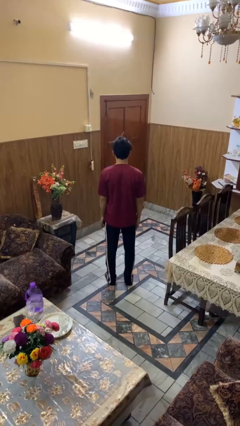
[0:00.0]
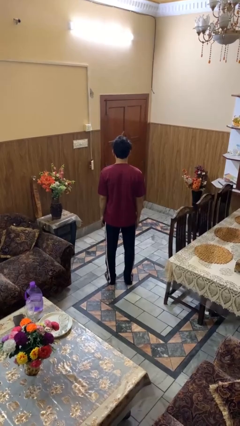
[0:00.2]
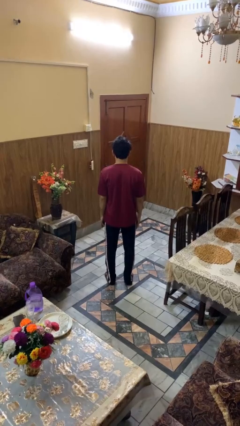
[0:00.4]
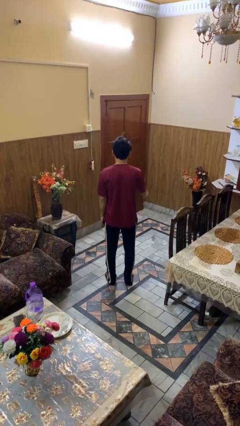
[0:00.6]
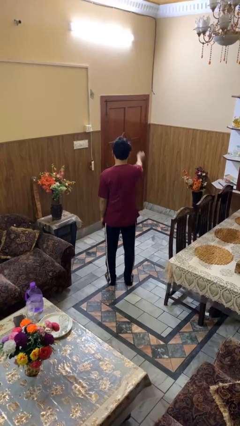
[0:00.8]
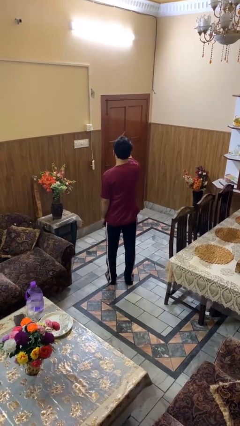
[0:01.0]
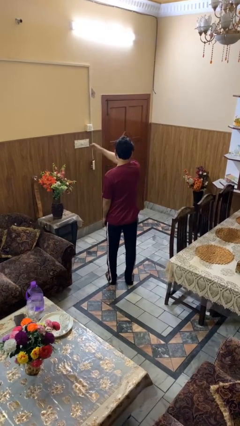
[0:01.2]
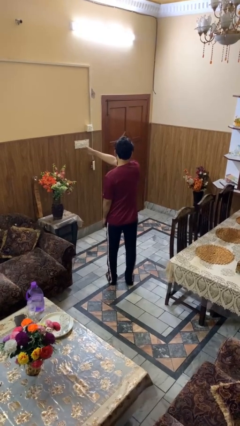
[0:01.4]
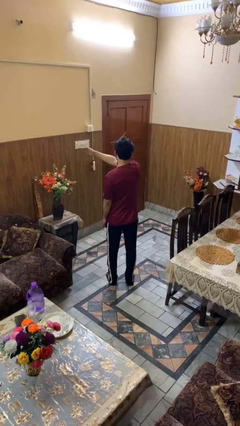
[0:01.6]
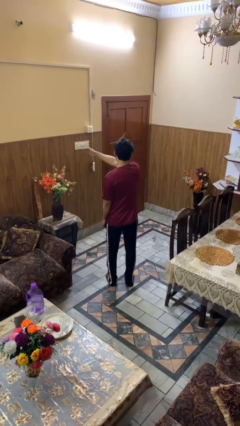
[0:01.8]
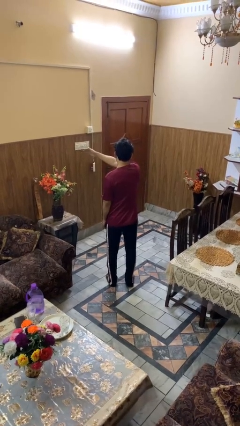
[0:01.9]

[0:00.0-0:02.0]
person gestures swipe left

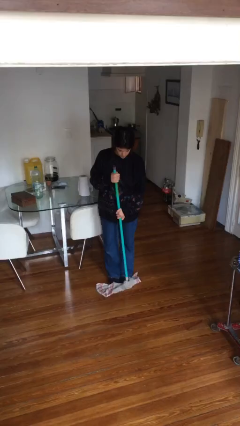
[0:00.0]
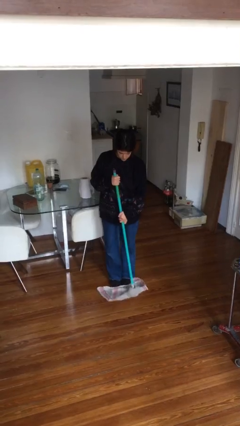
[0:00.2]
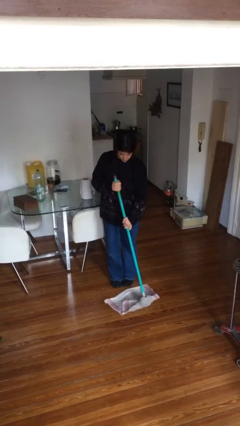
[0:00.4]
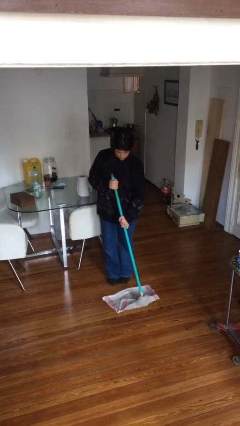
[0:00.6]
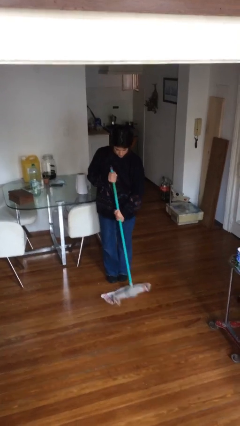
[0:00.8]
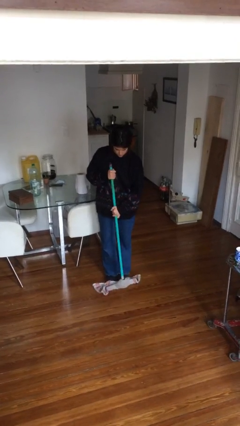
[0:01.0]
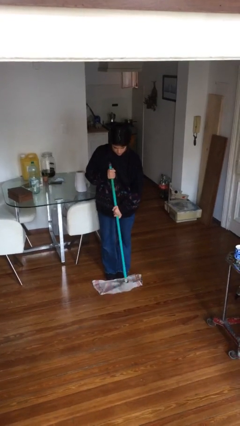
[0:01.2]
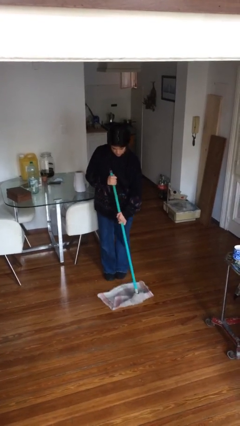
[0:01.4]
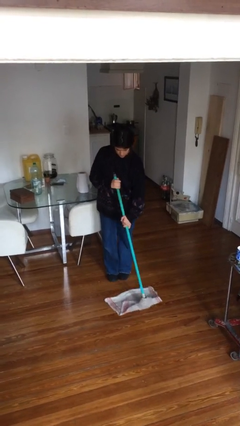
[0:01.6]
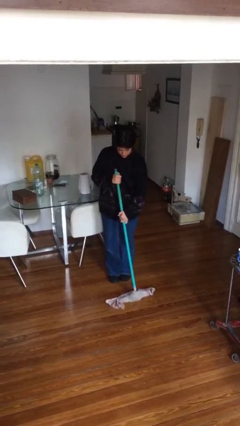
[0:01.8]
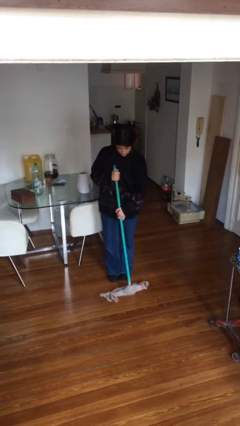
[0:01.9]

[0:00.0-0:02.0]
person mops

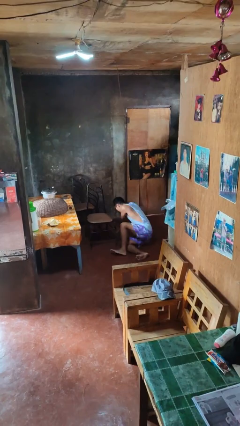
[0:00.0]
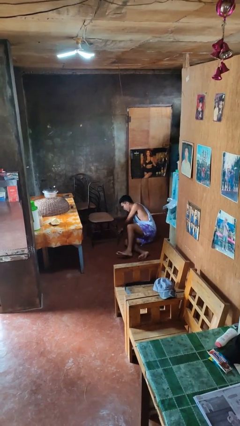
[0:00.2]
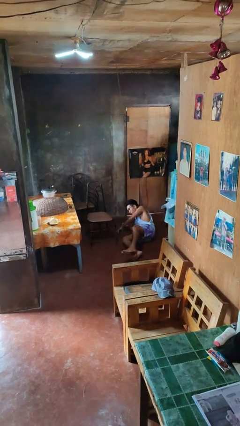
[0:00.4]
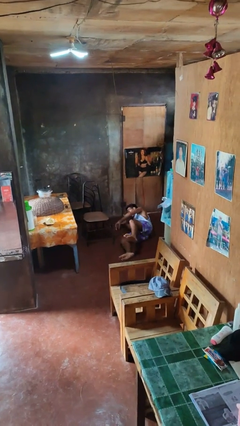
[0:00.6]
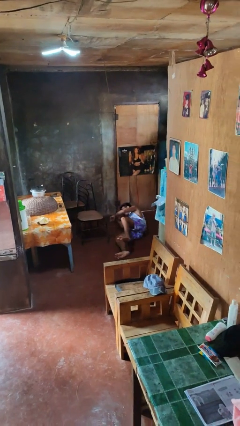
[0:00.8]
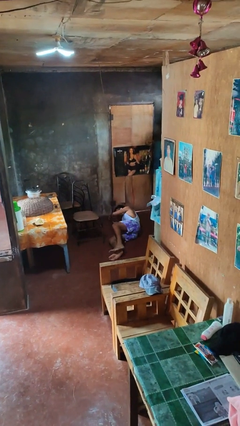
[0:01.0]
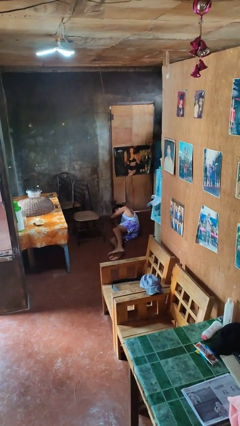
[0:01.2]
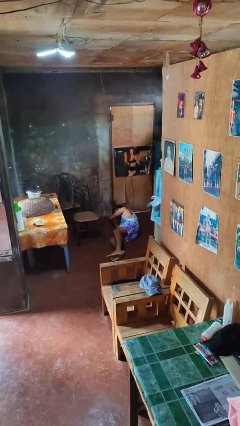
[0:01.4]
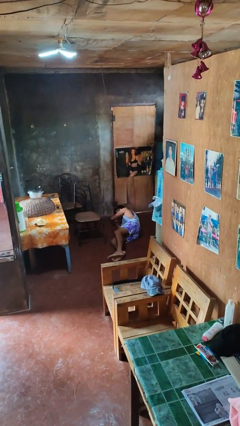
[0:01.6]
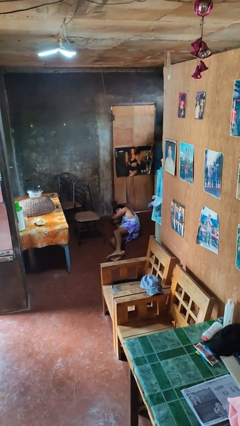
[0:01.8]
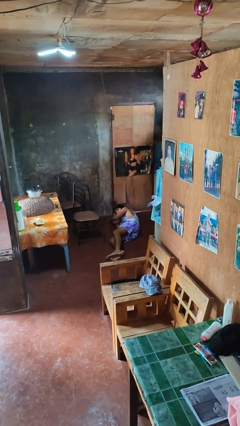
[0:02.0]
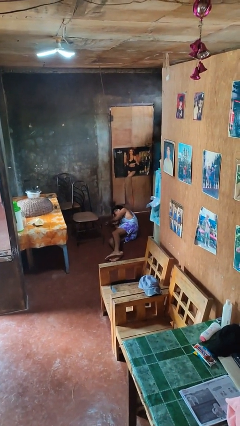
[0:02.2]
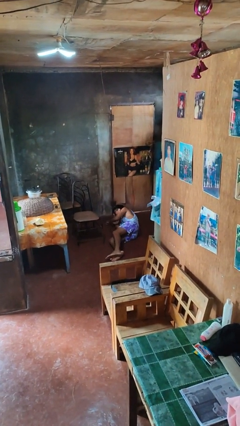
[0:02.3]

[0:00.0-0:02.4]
person lies down on floor

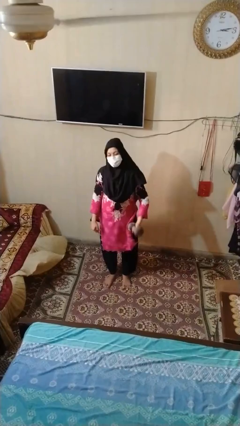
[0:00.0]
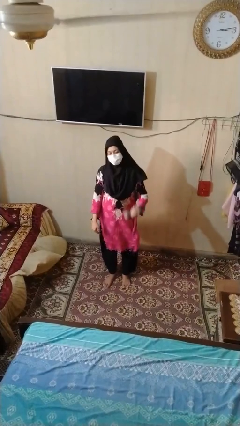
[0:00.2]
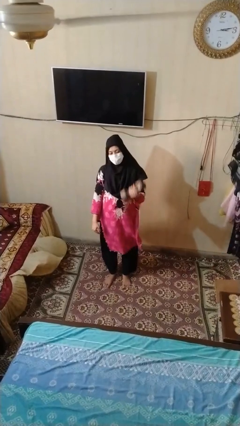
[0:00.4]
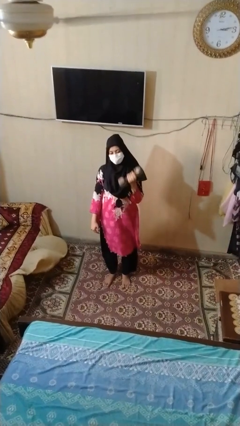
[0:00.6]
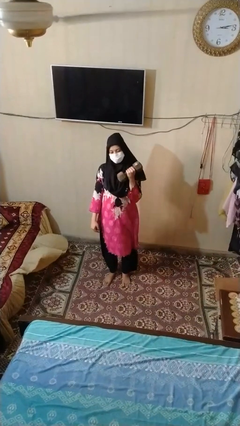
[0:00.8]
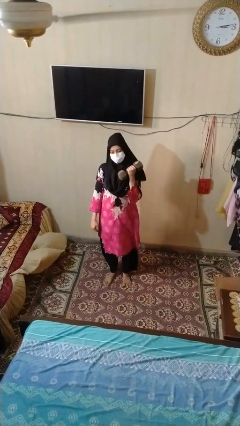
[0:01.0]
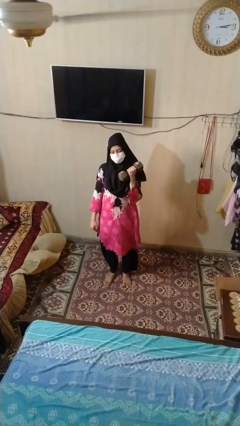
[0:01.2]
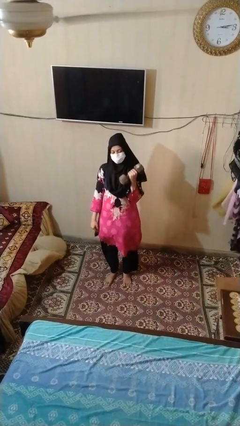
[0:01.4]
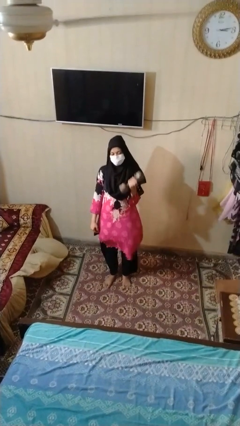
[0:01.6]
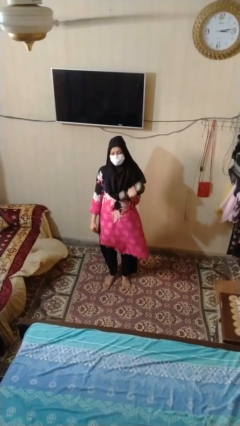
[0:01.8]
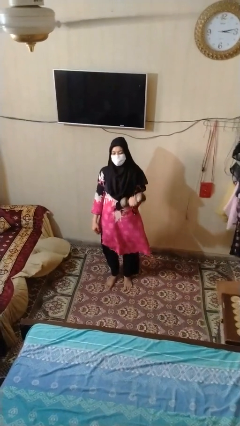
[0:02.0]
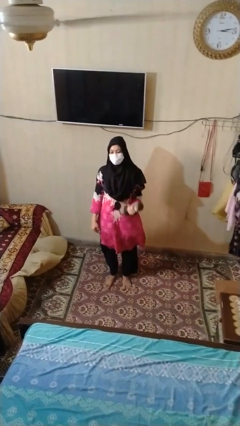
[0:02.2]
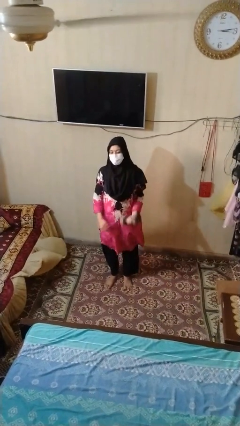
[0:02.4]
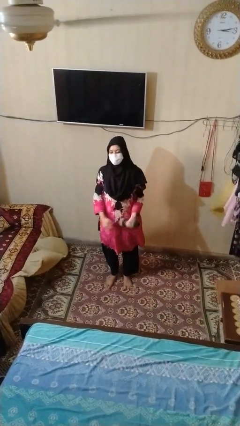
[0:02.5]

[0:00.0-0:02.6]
person lifts dumbbells

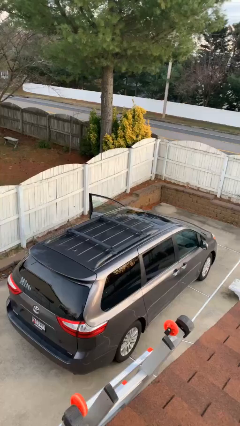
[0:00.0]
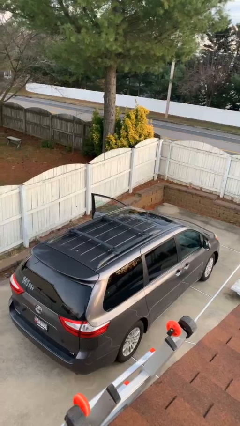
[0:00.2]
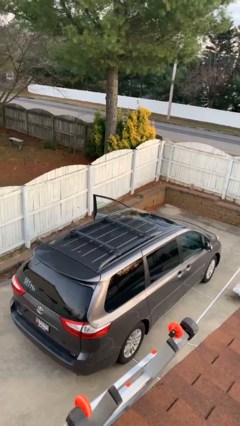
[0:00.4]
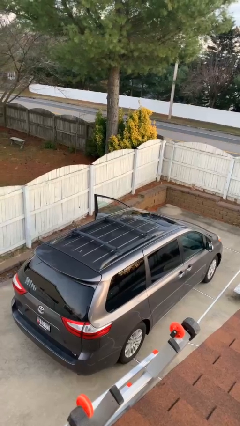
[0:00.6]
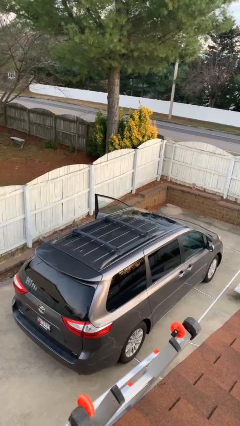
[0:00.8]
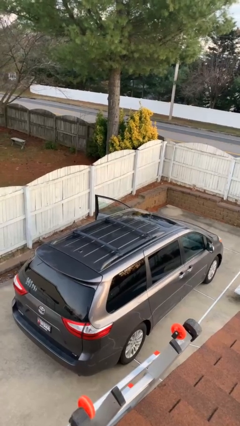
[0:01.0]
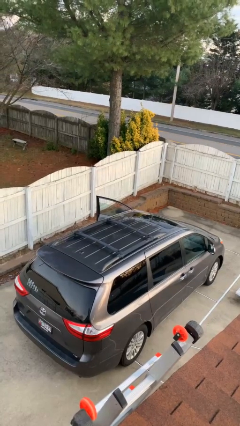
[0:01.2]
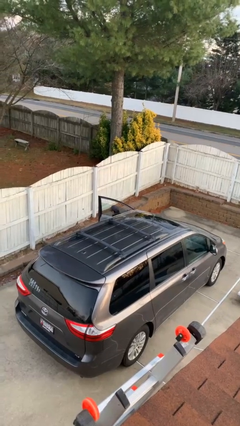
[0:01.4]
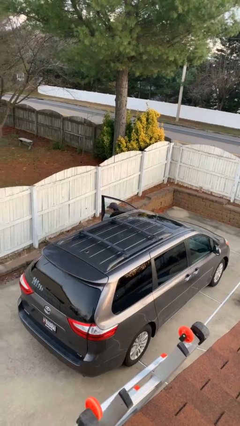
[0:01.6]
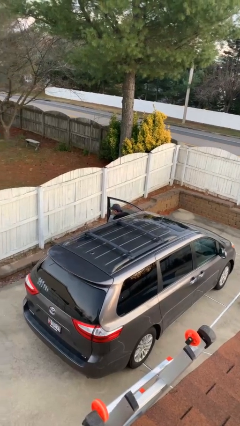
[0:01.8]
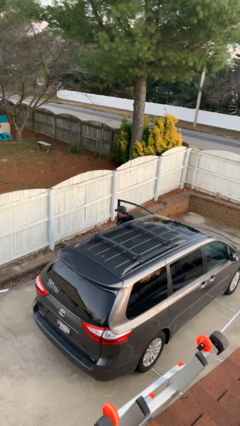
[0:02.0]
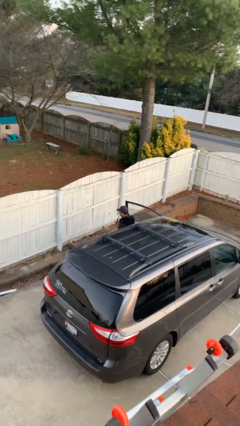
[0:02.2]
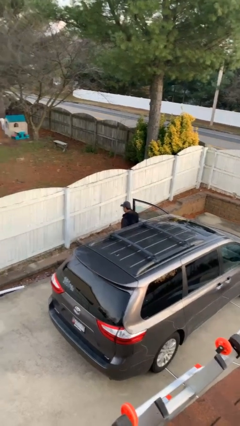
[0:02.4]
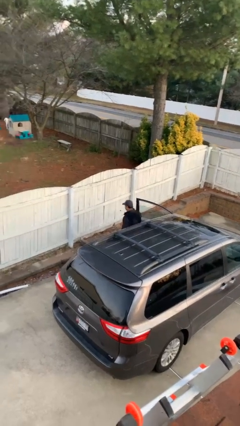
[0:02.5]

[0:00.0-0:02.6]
person exits car

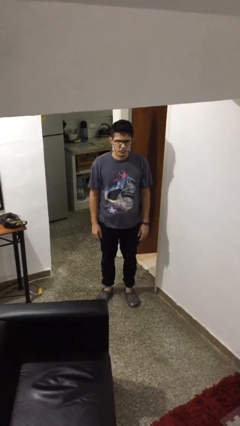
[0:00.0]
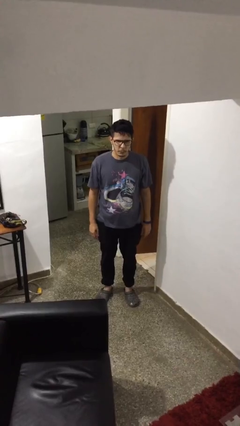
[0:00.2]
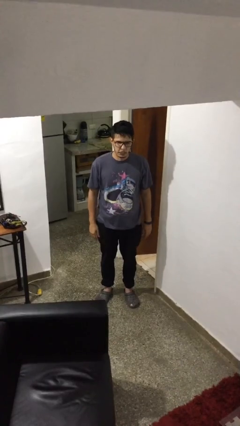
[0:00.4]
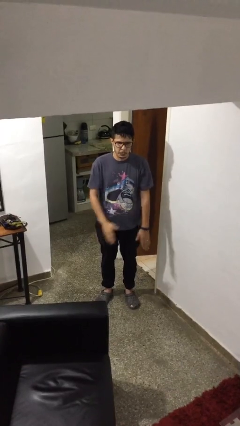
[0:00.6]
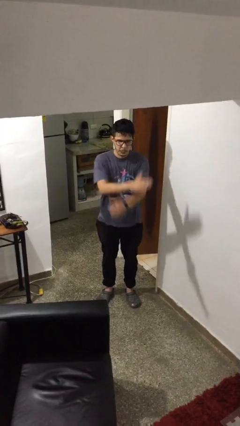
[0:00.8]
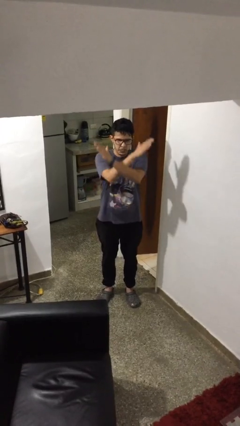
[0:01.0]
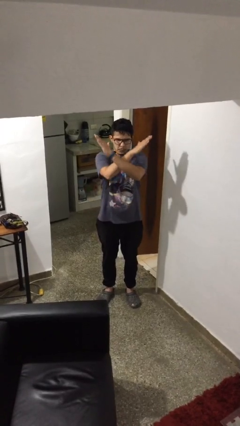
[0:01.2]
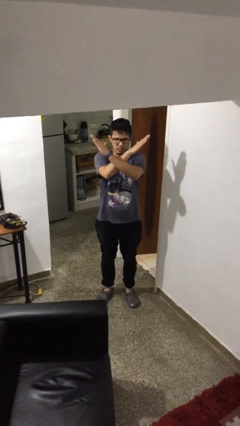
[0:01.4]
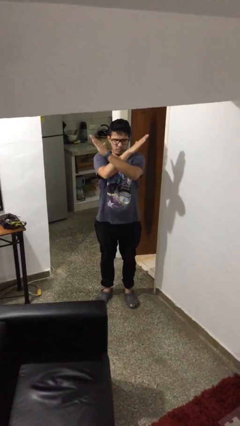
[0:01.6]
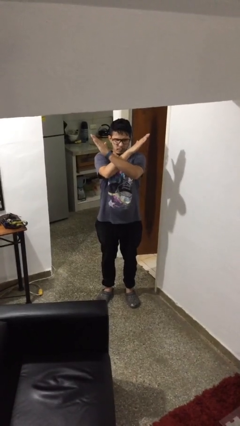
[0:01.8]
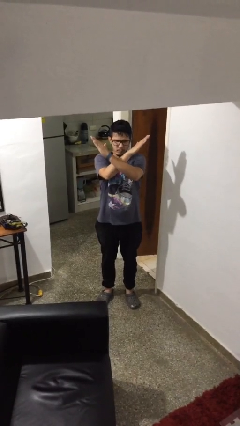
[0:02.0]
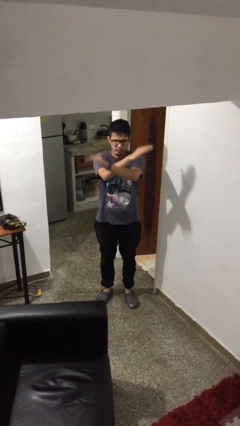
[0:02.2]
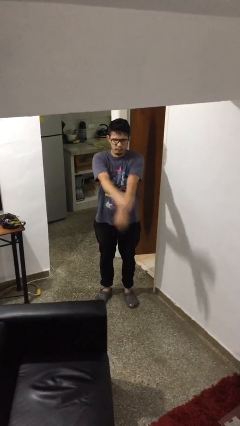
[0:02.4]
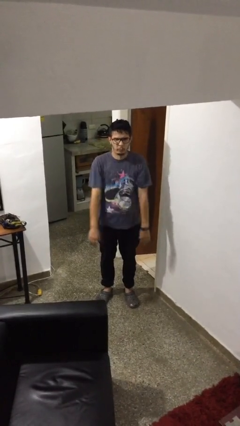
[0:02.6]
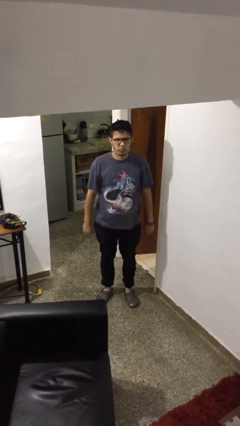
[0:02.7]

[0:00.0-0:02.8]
person gestures arms x

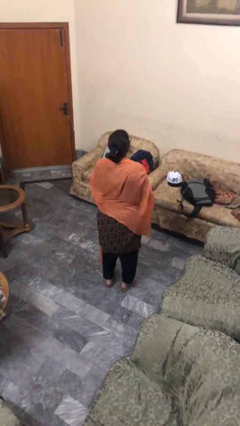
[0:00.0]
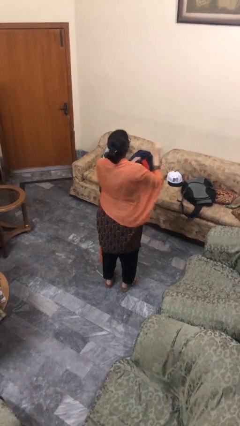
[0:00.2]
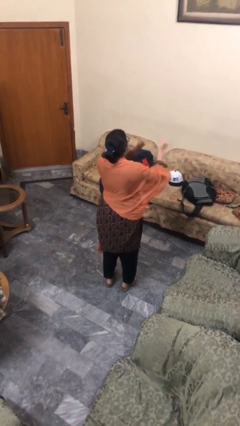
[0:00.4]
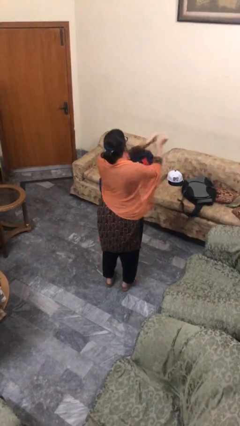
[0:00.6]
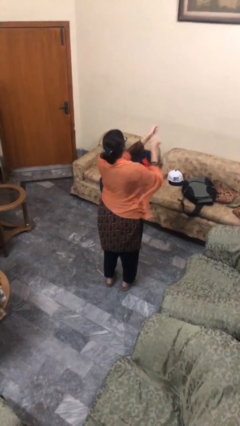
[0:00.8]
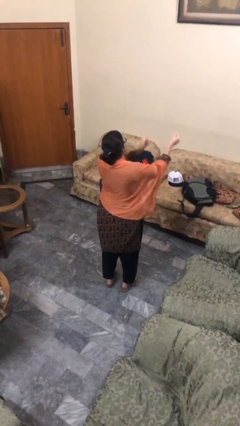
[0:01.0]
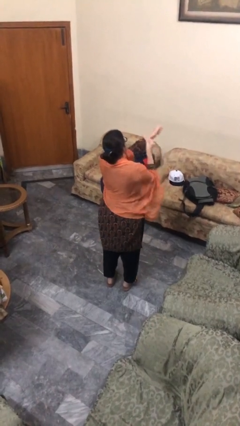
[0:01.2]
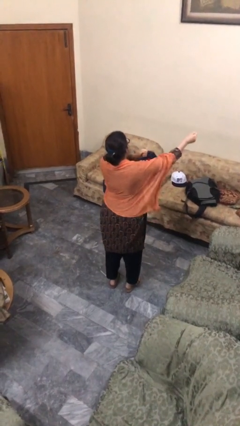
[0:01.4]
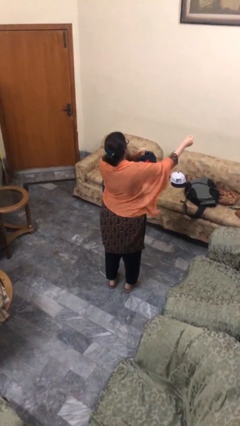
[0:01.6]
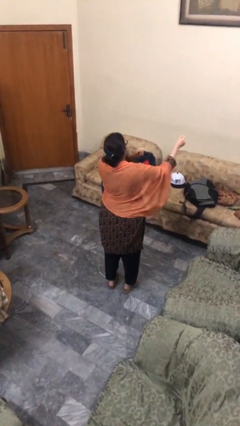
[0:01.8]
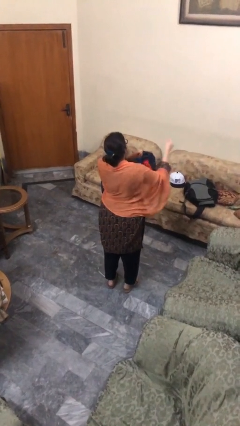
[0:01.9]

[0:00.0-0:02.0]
person punches

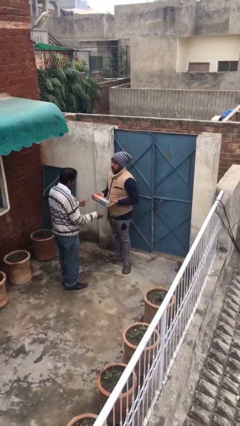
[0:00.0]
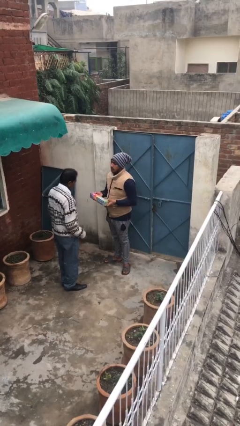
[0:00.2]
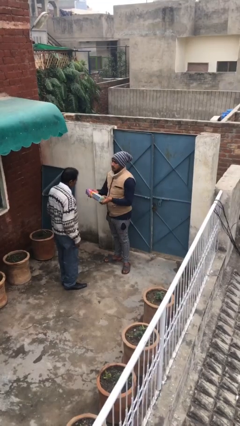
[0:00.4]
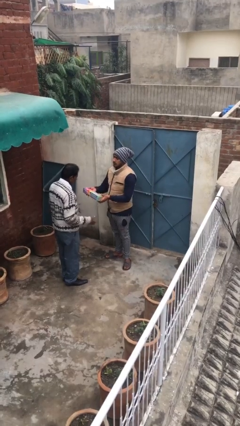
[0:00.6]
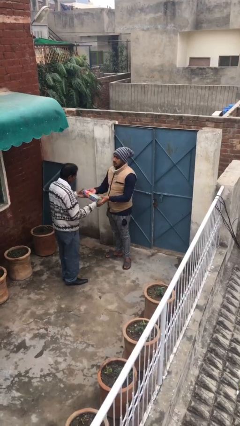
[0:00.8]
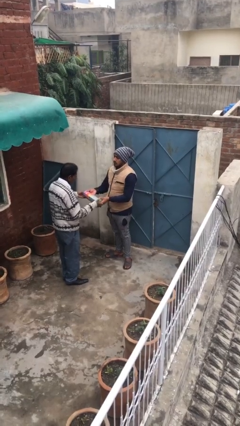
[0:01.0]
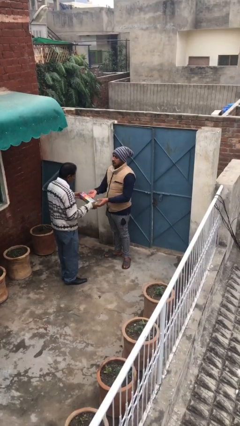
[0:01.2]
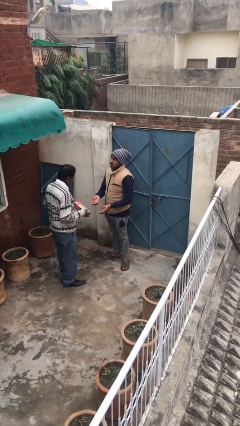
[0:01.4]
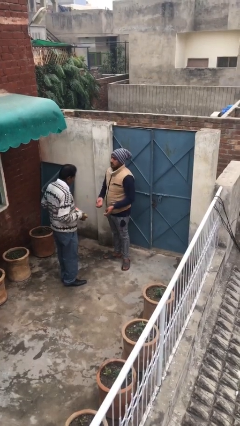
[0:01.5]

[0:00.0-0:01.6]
person transfers object to person
